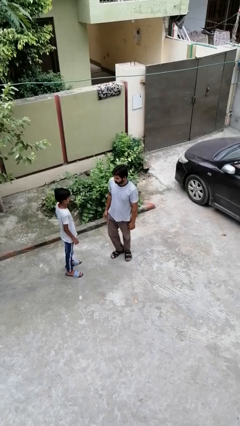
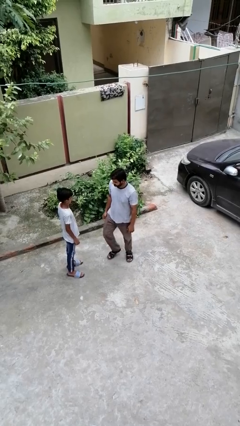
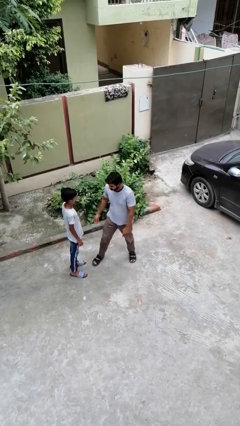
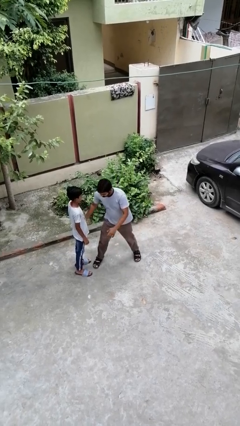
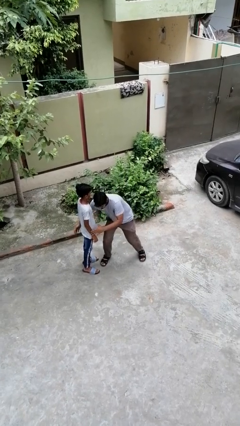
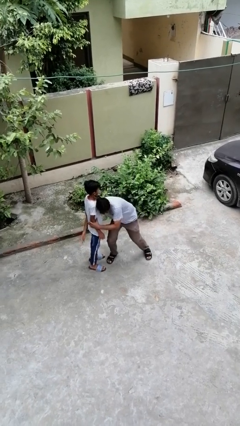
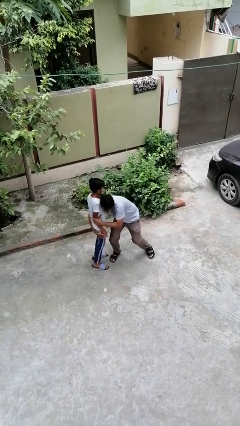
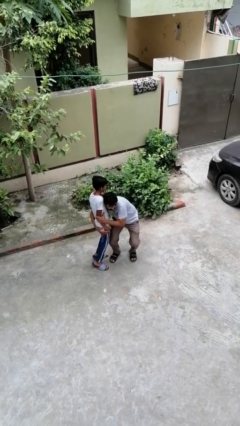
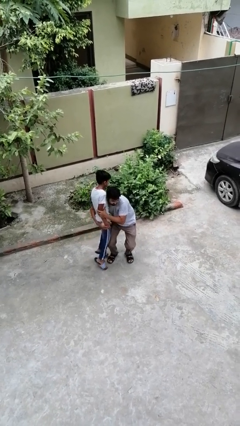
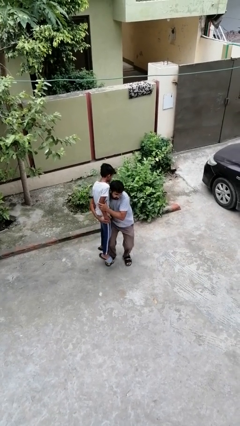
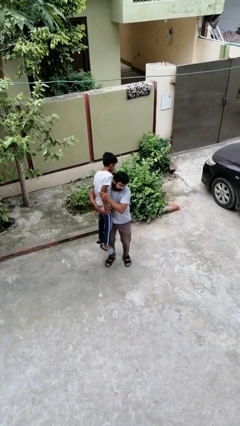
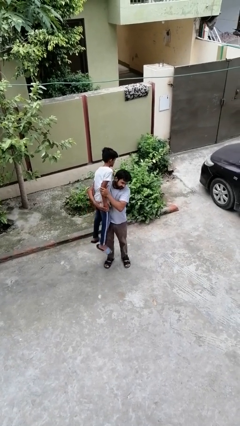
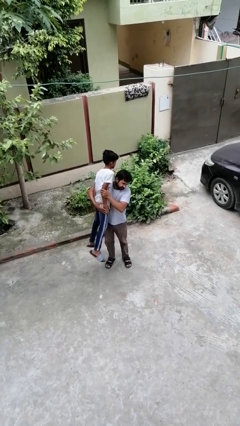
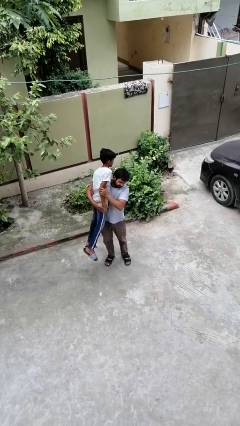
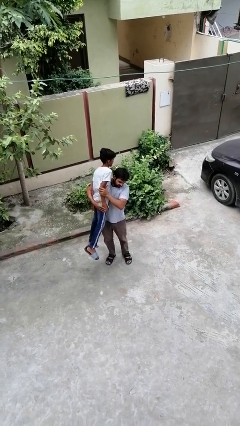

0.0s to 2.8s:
person picks up person

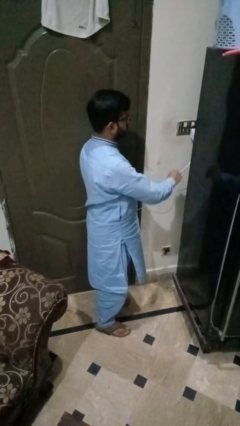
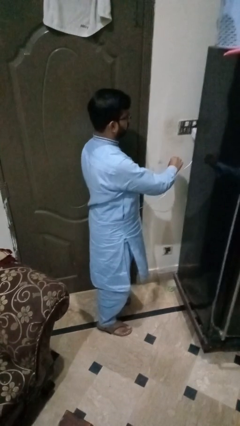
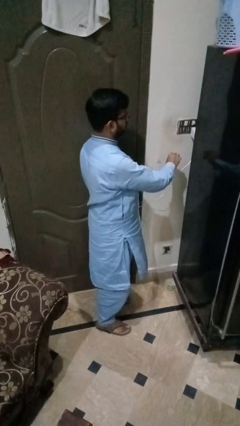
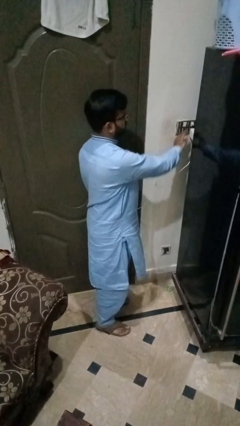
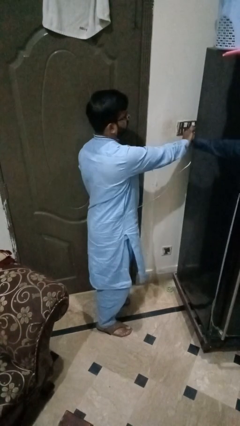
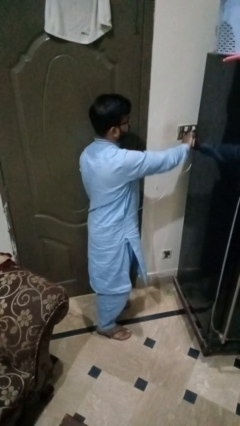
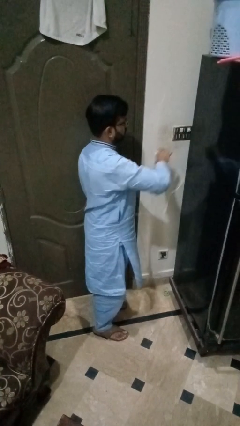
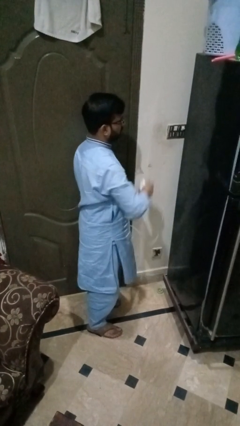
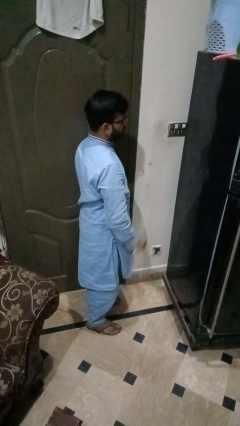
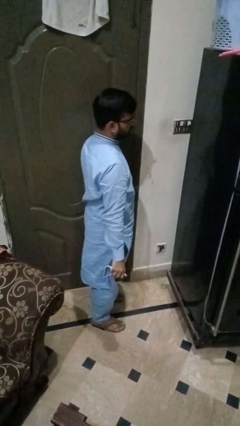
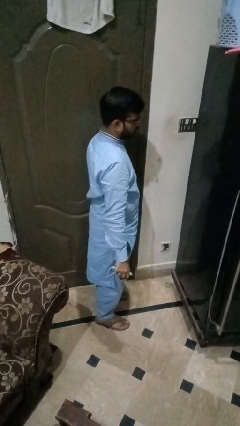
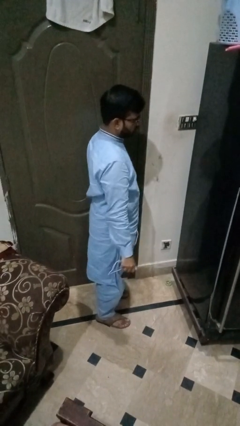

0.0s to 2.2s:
person unplugs from electrical socket

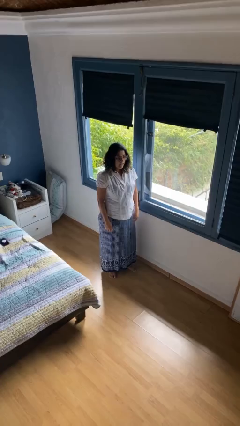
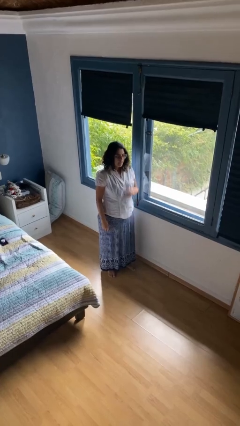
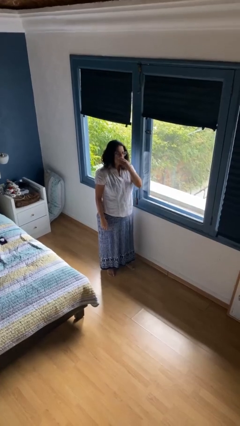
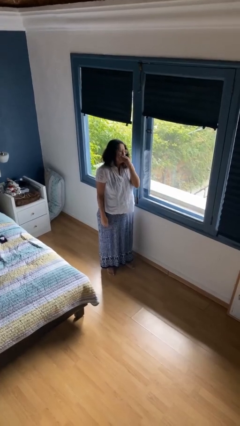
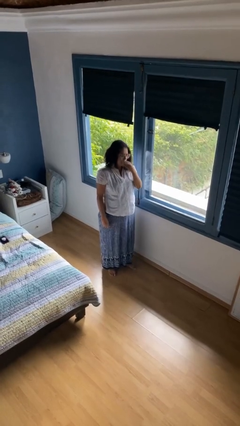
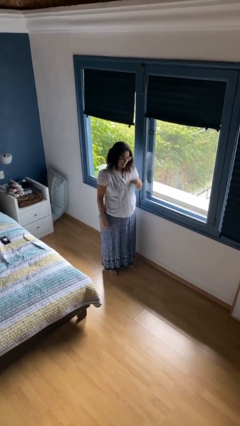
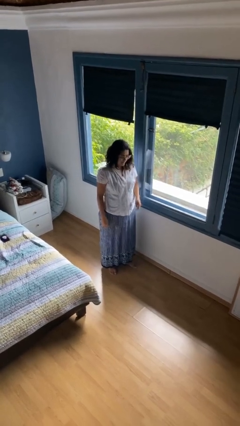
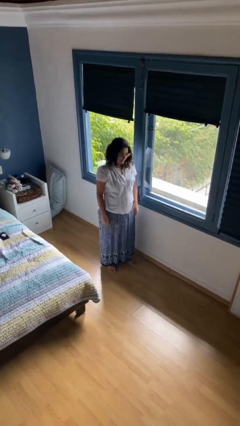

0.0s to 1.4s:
person sneezes into hand

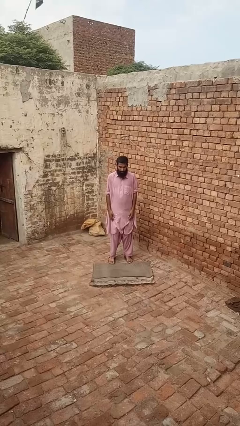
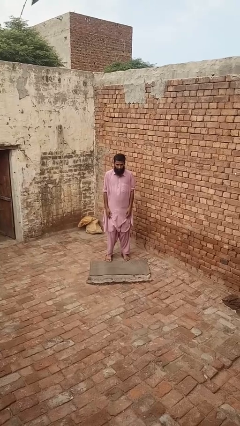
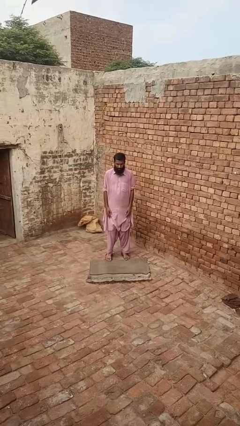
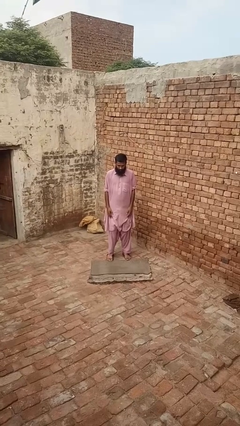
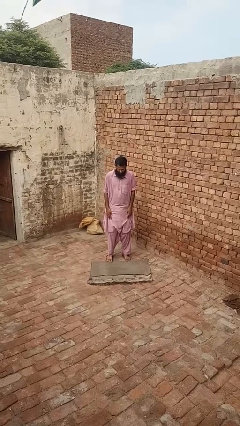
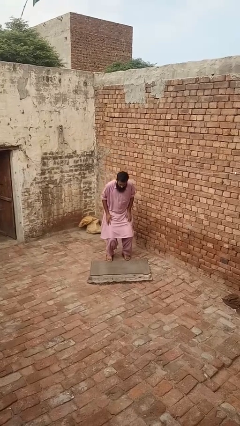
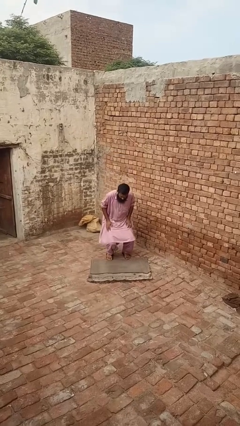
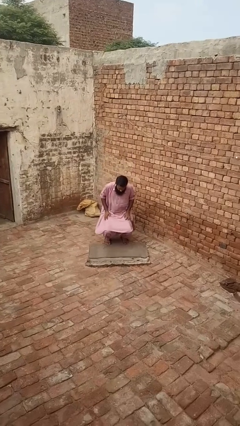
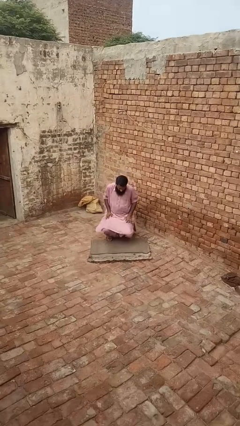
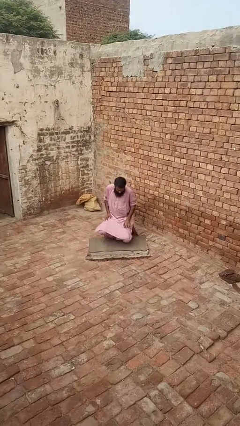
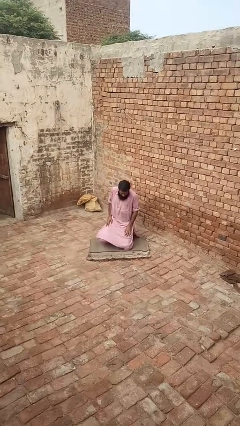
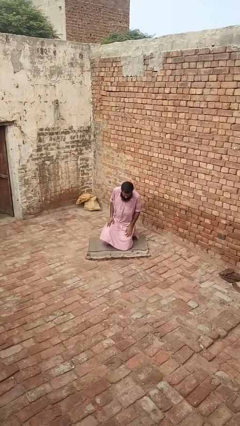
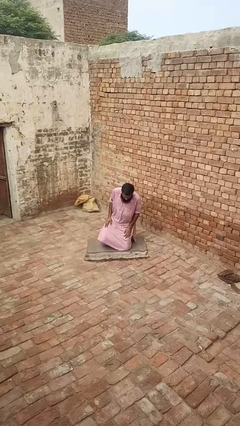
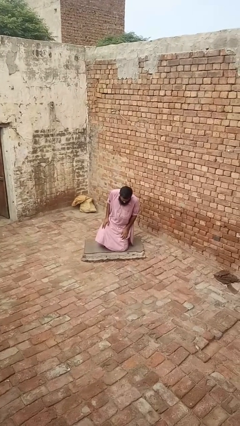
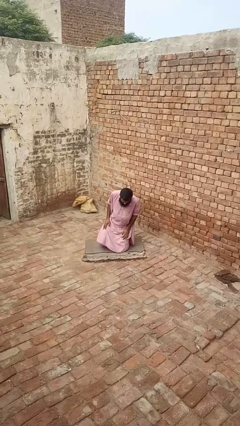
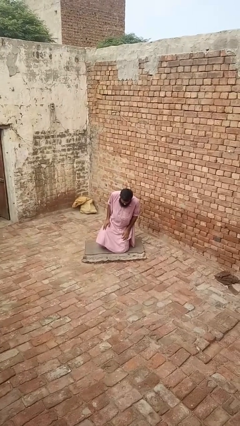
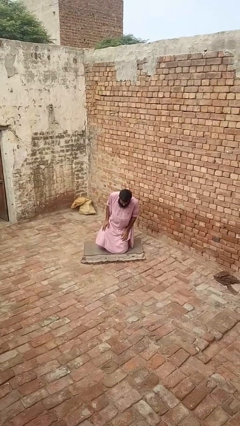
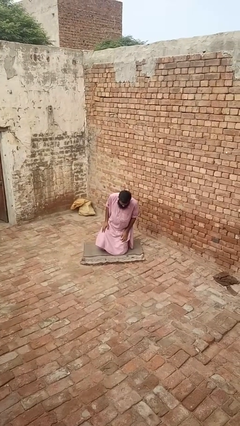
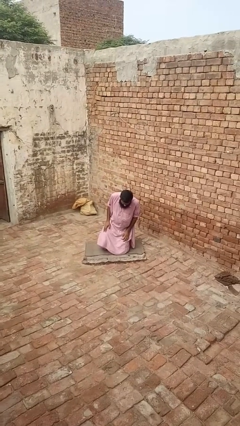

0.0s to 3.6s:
person kneels

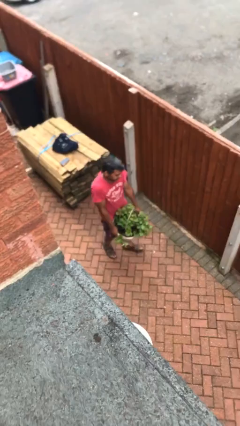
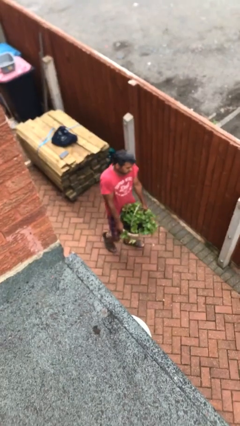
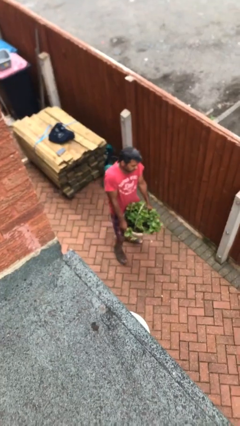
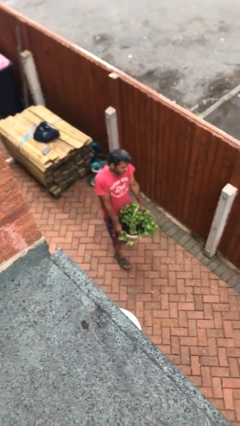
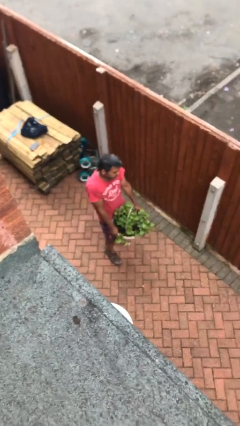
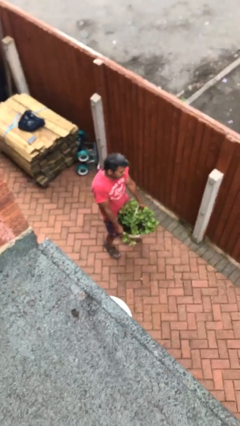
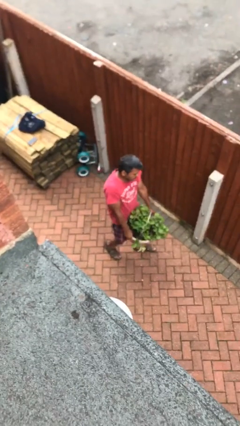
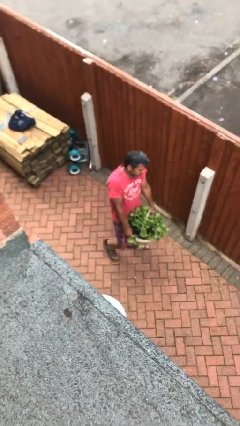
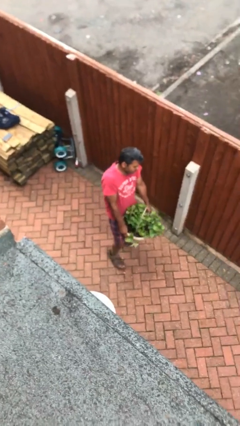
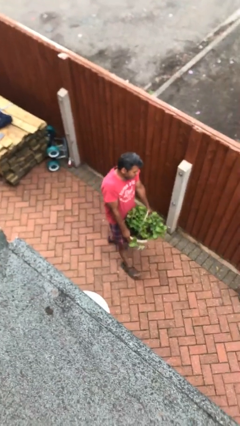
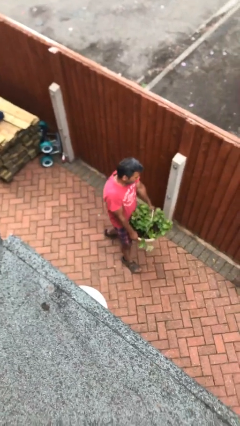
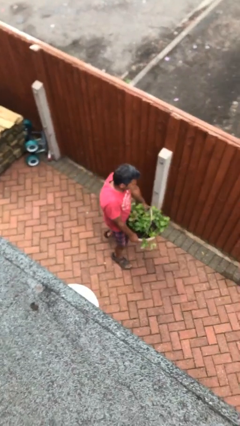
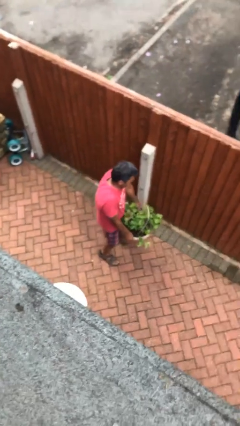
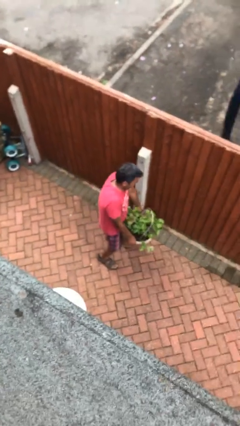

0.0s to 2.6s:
person carries heavy object

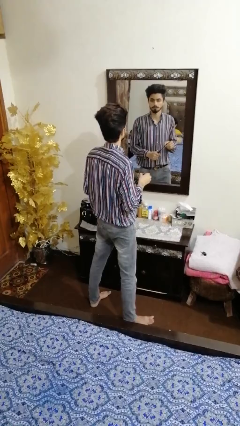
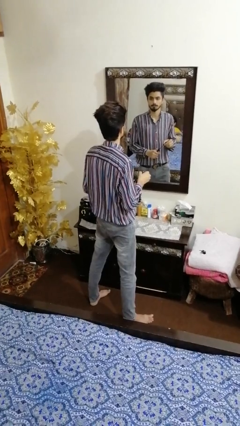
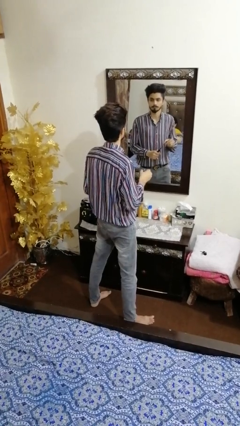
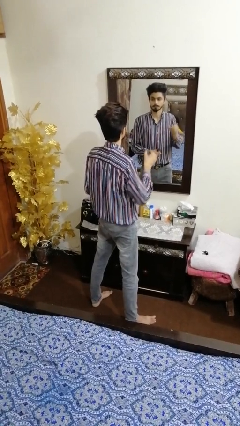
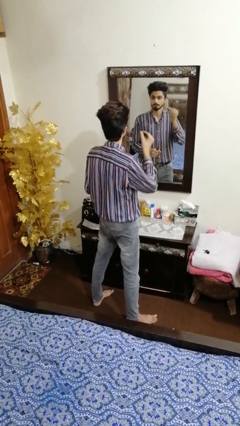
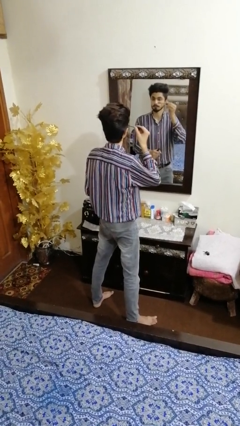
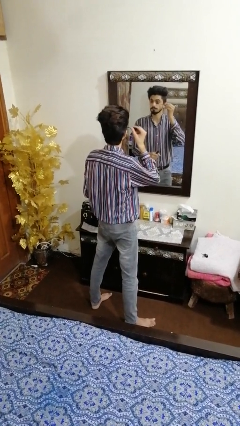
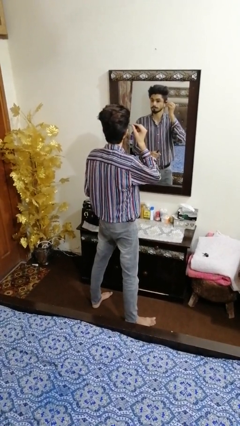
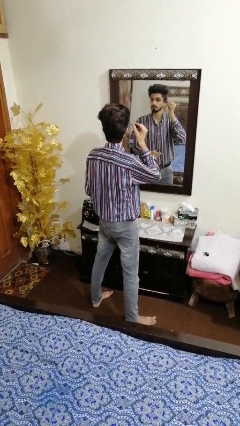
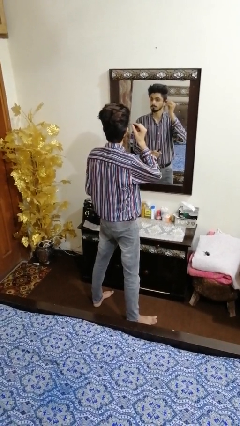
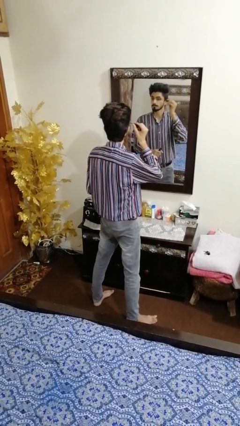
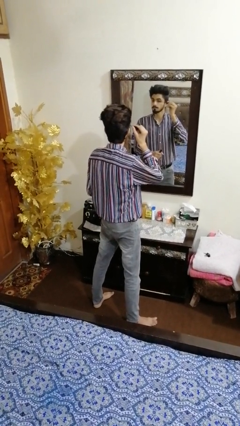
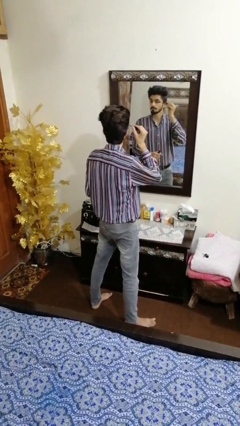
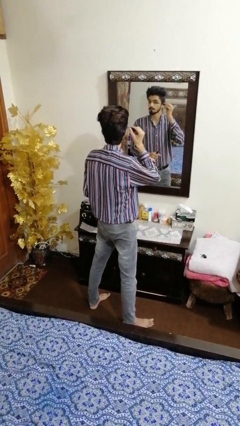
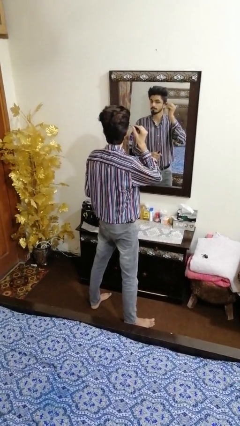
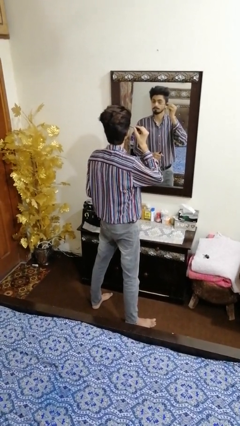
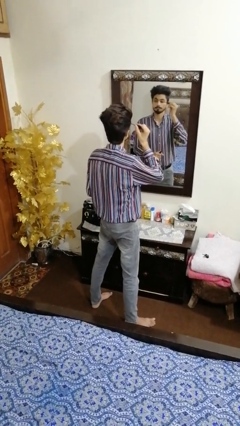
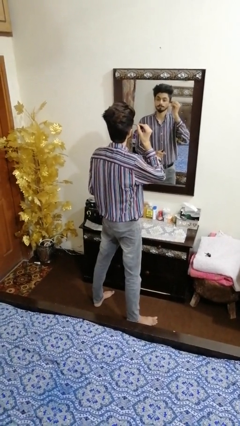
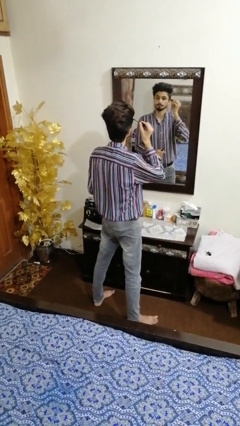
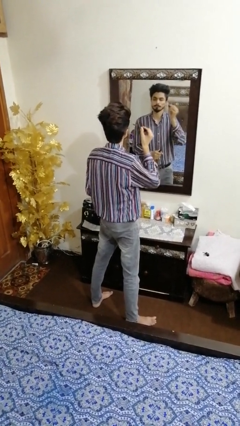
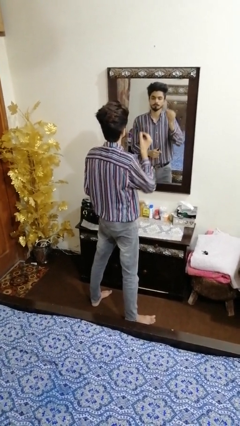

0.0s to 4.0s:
person applies eye makeup

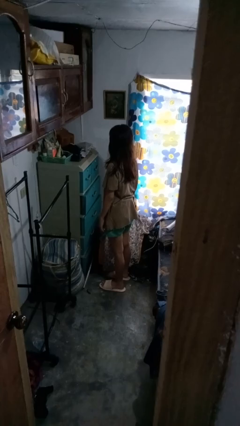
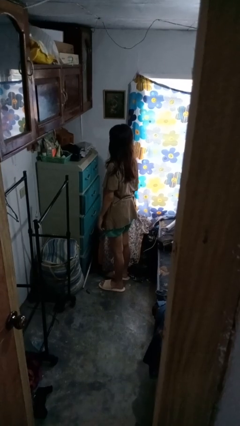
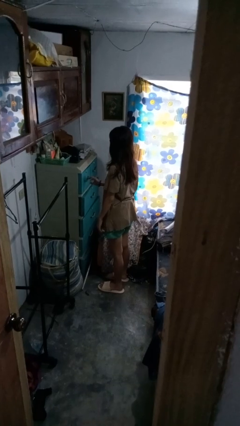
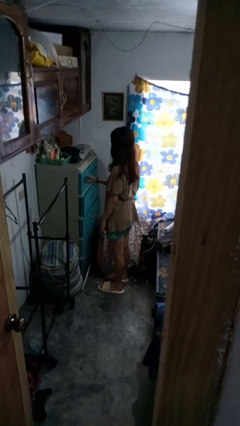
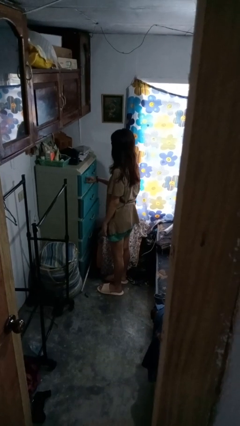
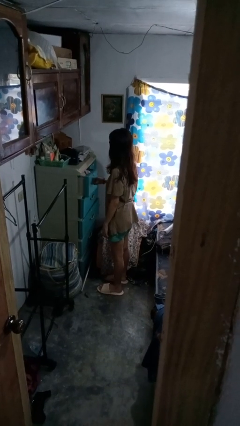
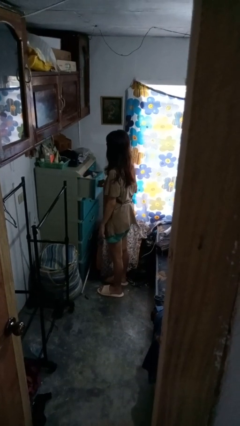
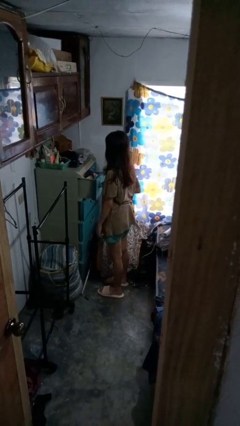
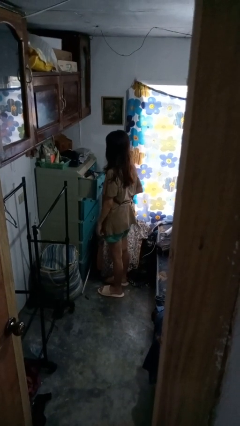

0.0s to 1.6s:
person opens dresser drawer
